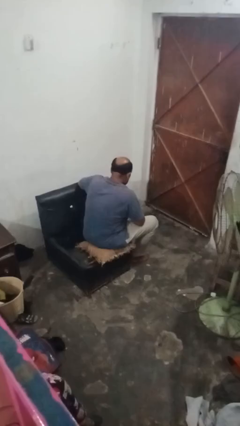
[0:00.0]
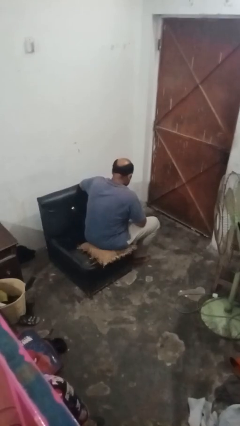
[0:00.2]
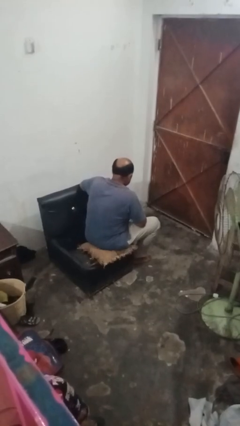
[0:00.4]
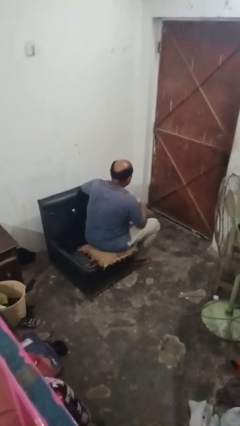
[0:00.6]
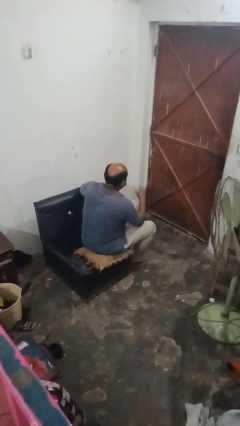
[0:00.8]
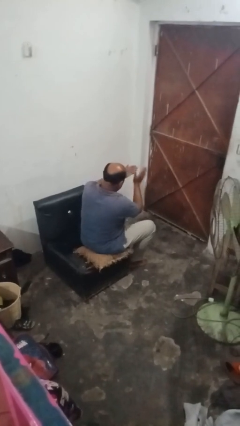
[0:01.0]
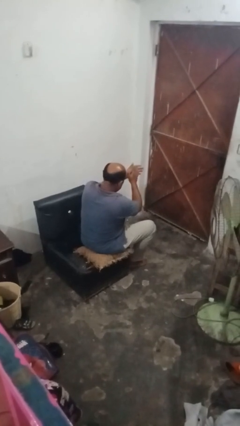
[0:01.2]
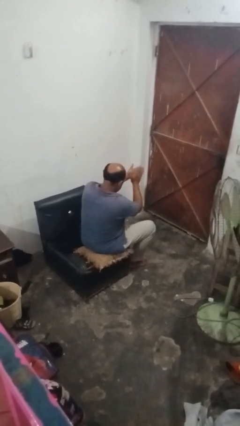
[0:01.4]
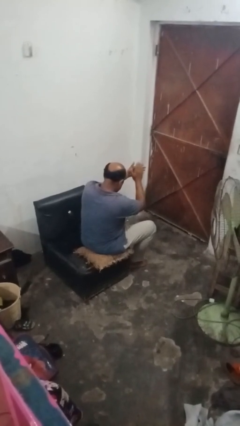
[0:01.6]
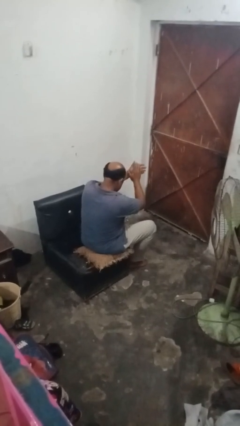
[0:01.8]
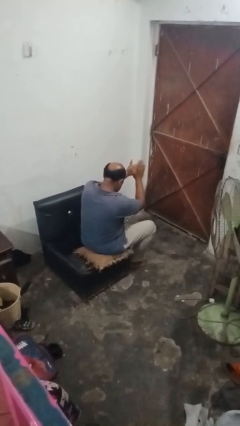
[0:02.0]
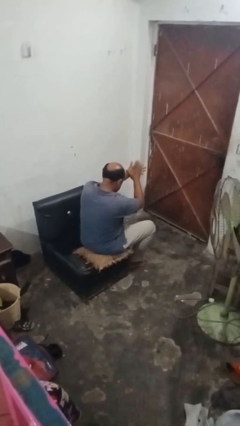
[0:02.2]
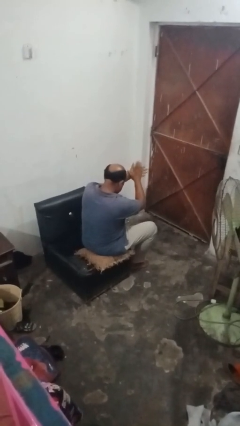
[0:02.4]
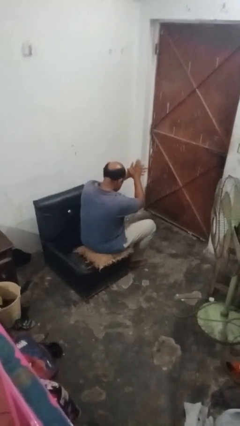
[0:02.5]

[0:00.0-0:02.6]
person claps hands

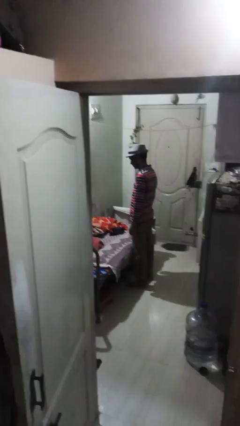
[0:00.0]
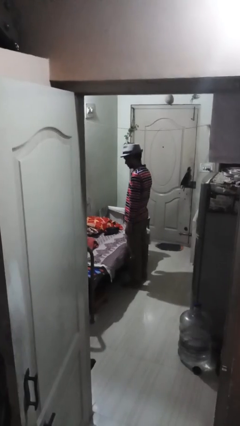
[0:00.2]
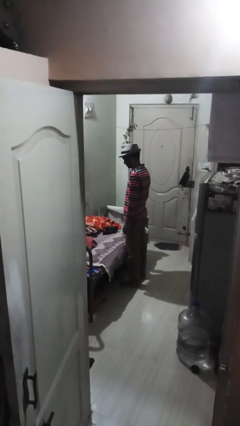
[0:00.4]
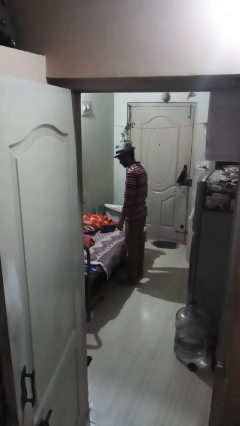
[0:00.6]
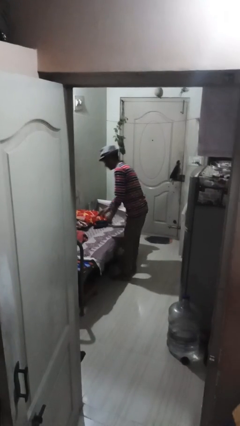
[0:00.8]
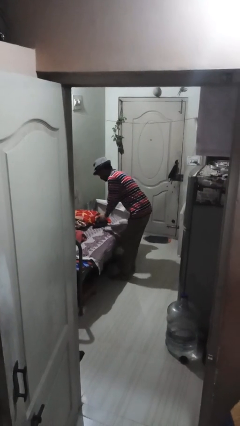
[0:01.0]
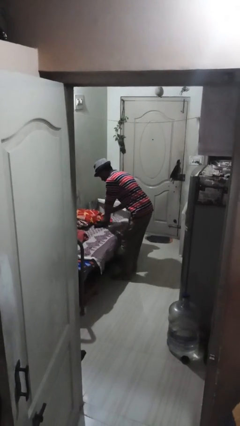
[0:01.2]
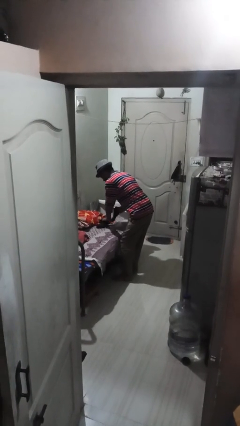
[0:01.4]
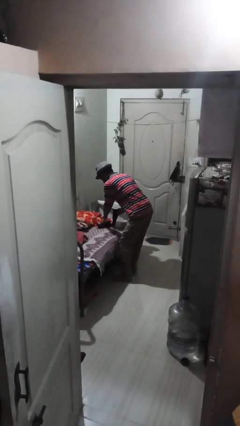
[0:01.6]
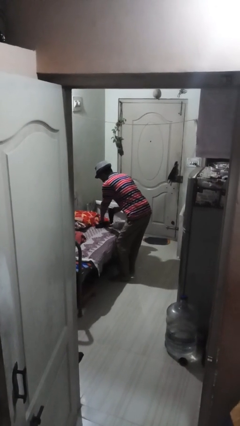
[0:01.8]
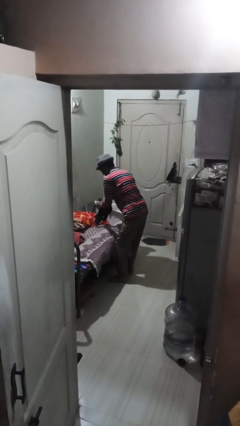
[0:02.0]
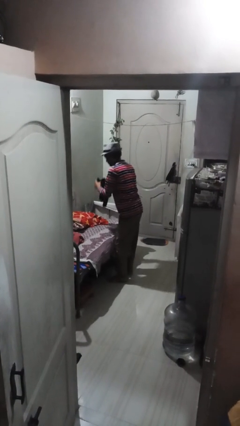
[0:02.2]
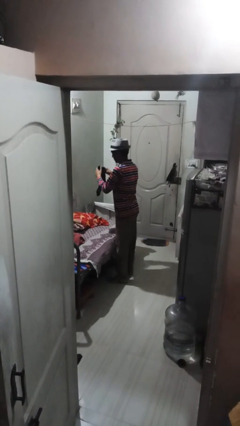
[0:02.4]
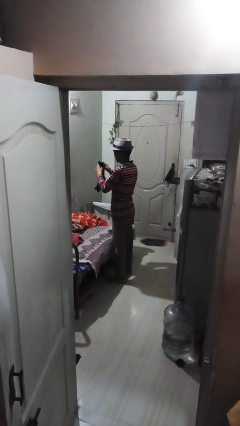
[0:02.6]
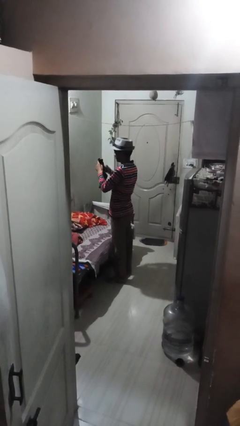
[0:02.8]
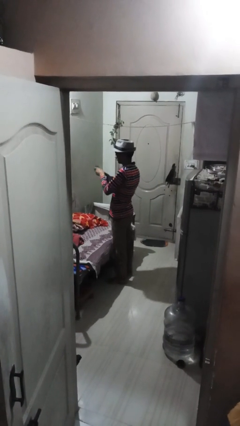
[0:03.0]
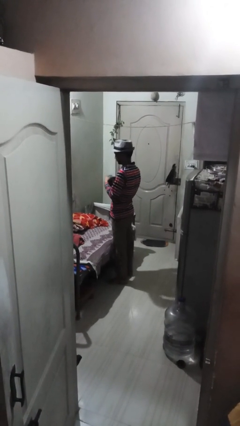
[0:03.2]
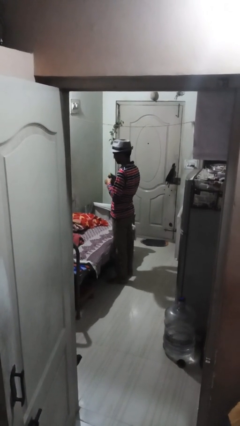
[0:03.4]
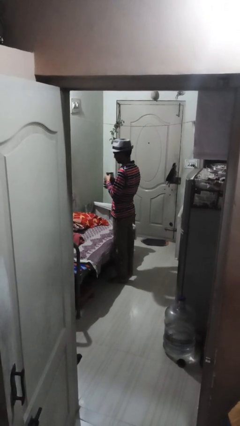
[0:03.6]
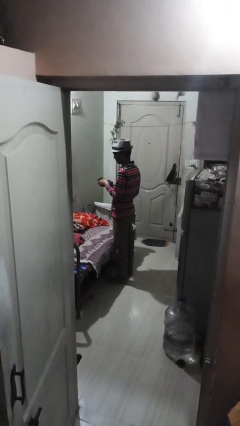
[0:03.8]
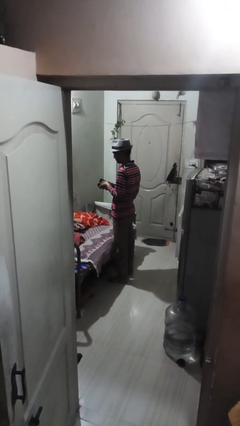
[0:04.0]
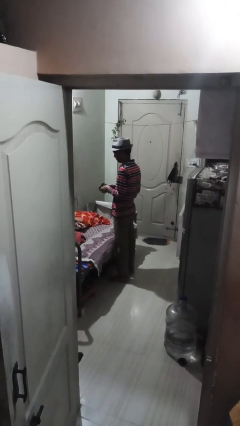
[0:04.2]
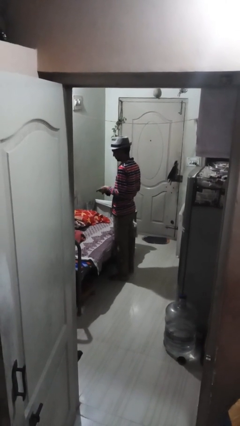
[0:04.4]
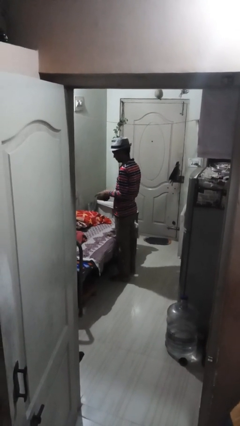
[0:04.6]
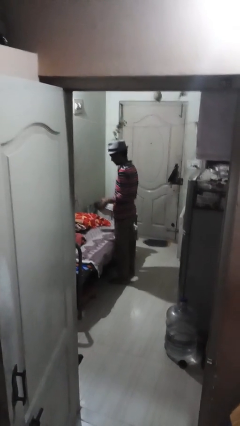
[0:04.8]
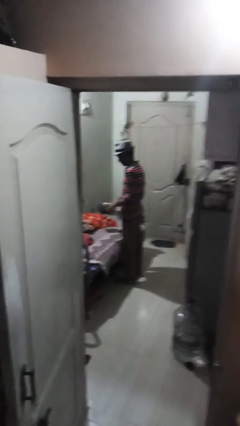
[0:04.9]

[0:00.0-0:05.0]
person folds socks

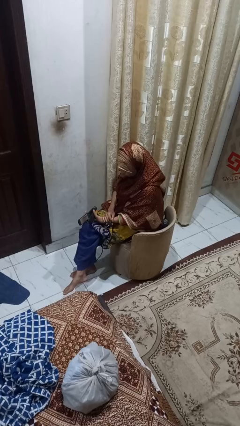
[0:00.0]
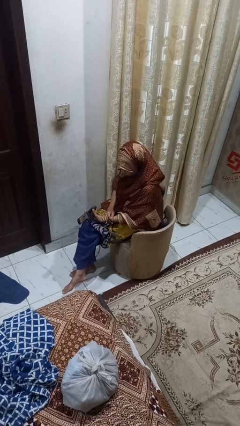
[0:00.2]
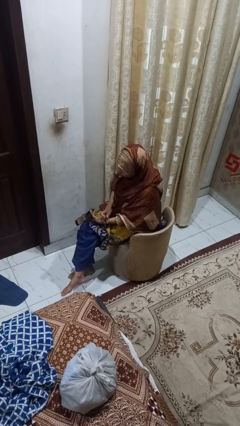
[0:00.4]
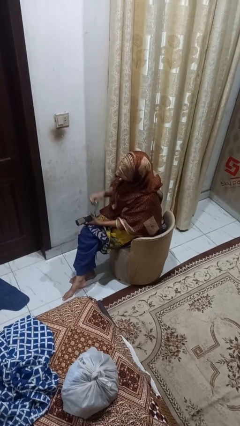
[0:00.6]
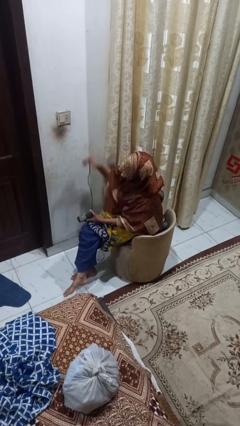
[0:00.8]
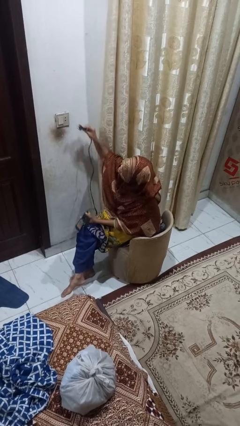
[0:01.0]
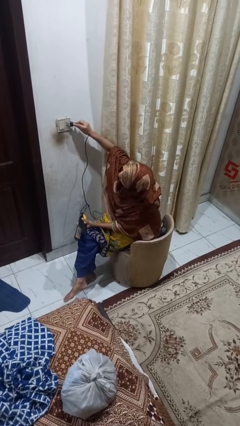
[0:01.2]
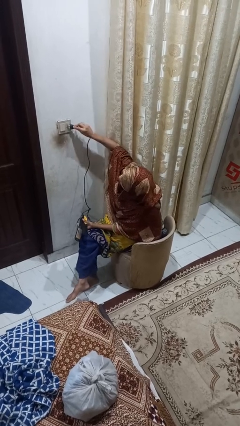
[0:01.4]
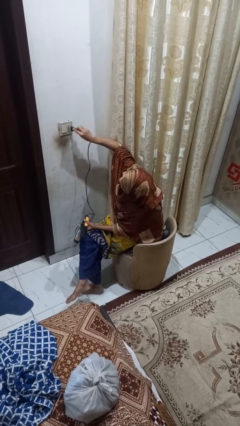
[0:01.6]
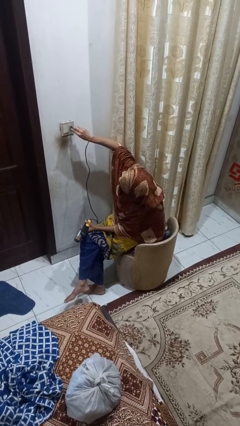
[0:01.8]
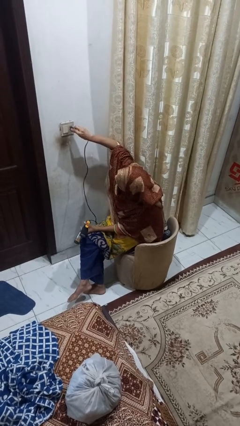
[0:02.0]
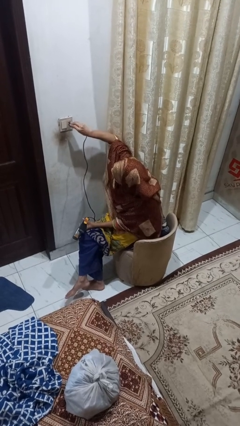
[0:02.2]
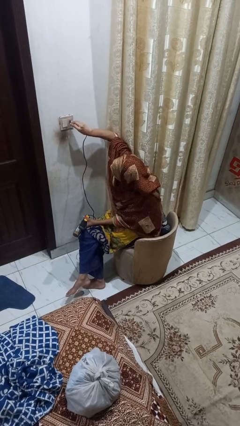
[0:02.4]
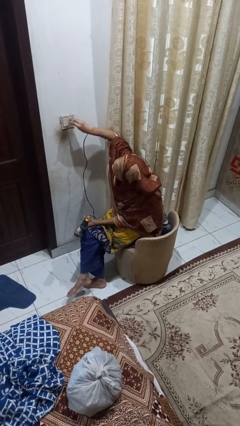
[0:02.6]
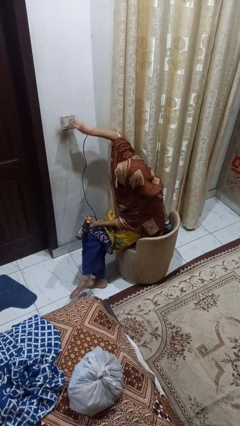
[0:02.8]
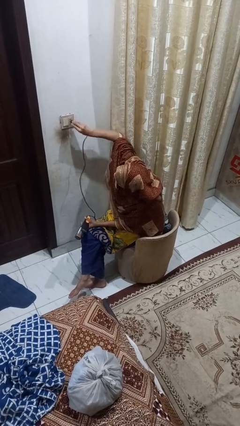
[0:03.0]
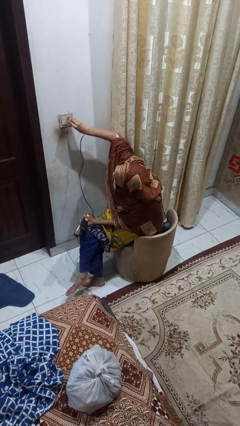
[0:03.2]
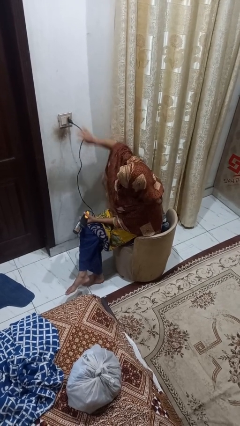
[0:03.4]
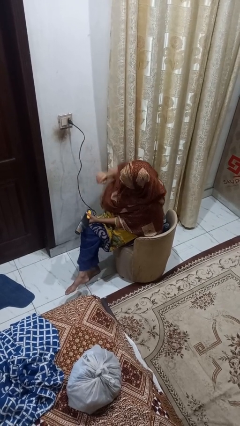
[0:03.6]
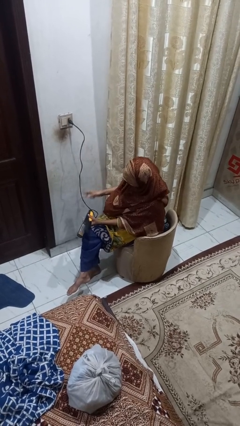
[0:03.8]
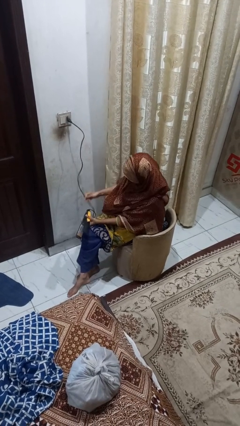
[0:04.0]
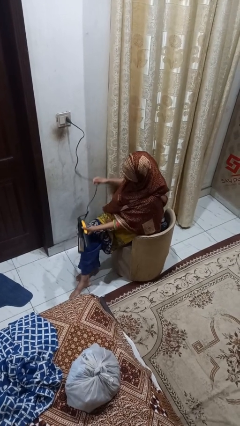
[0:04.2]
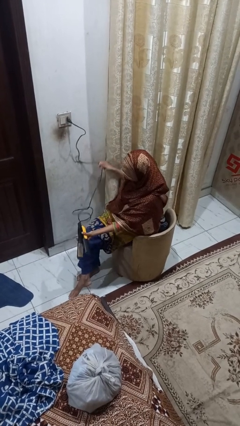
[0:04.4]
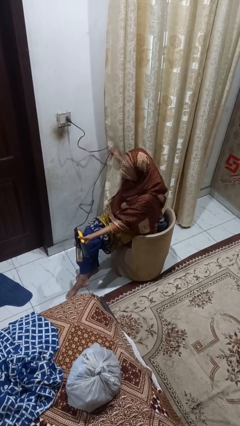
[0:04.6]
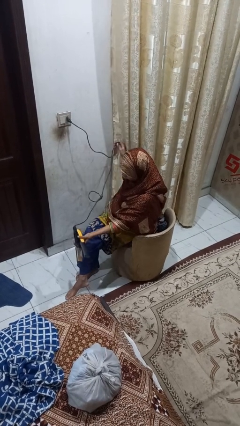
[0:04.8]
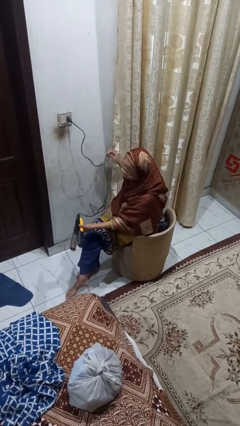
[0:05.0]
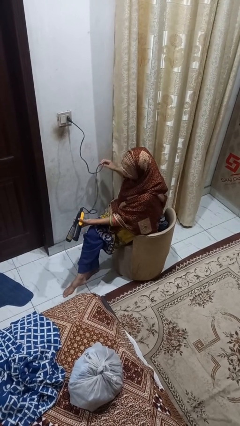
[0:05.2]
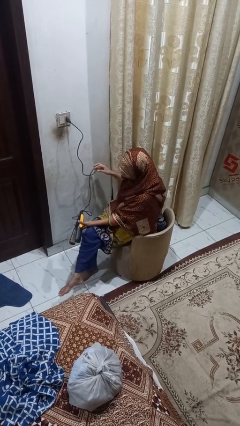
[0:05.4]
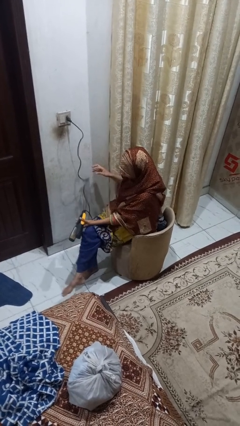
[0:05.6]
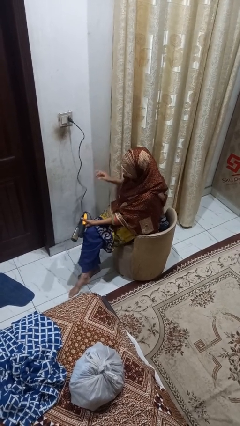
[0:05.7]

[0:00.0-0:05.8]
person plugs into electrical socket

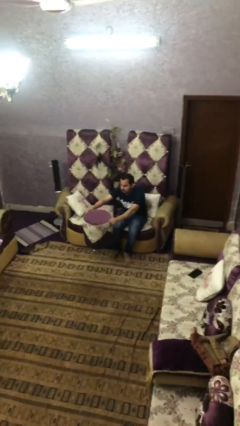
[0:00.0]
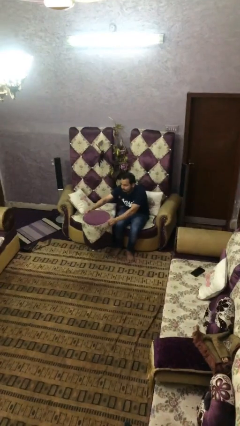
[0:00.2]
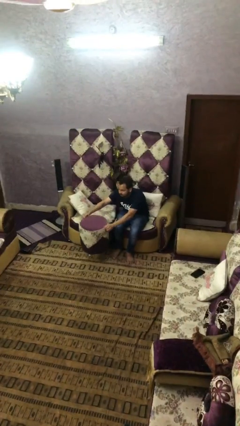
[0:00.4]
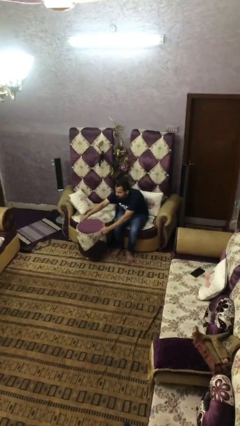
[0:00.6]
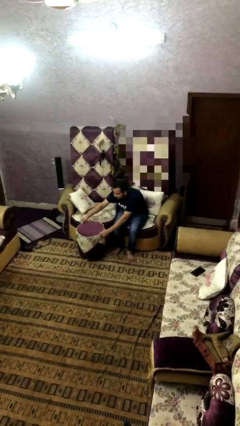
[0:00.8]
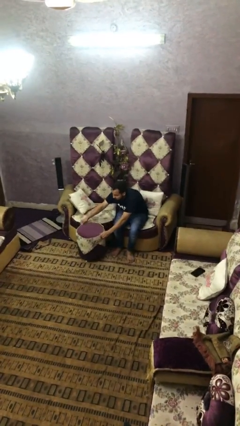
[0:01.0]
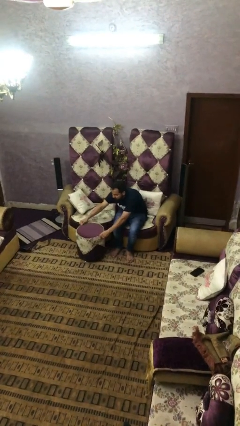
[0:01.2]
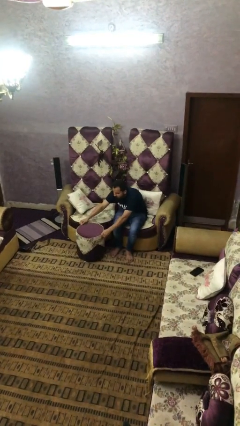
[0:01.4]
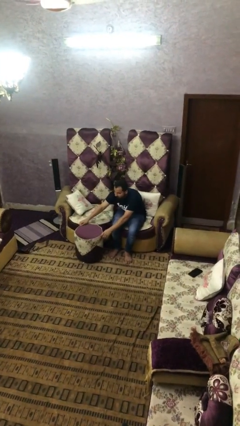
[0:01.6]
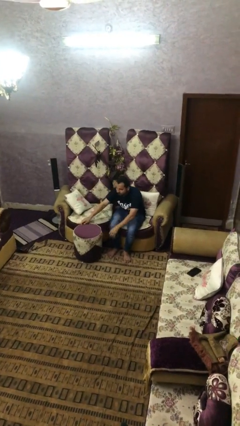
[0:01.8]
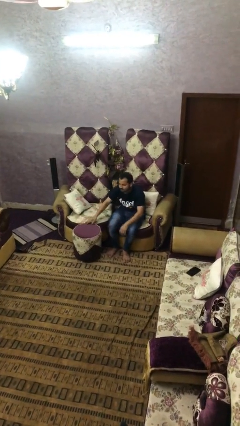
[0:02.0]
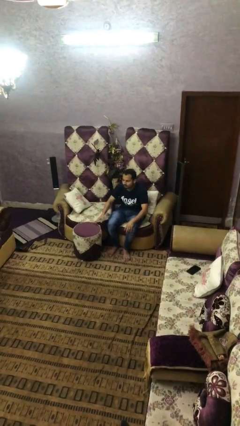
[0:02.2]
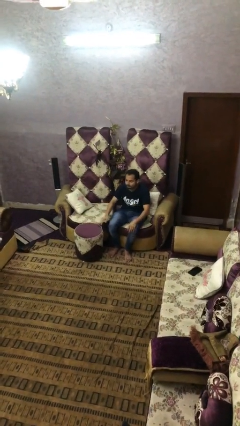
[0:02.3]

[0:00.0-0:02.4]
person puts down object on floor

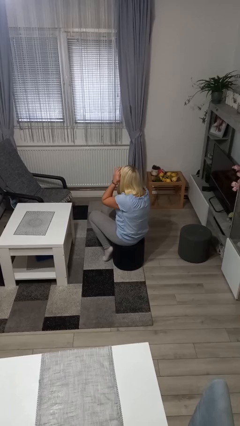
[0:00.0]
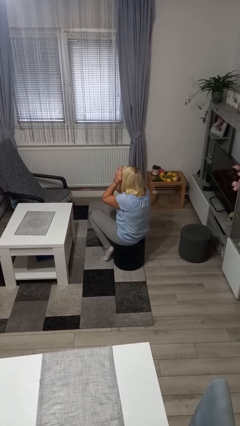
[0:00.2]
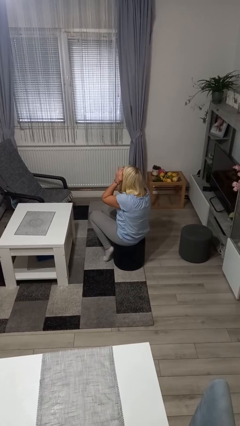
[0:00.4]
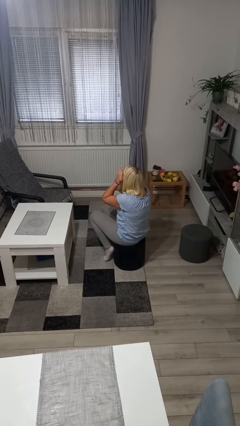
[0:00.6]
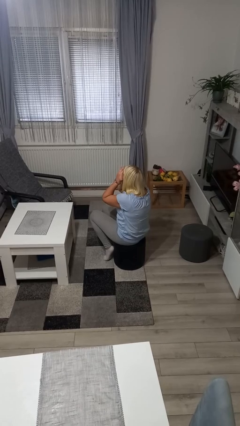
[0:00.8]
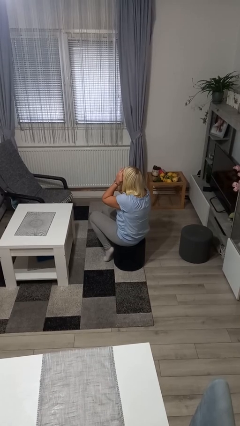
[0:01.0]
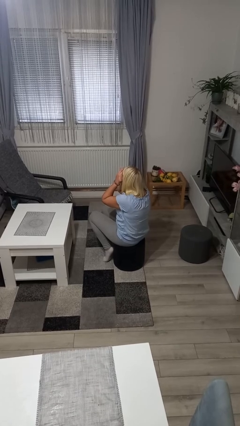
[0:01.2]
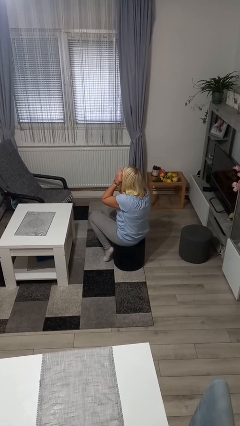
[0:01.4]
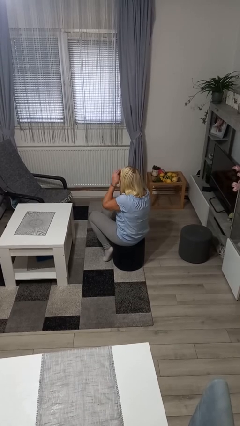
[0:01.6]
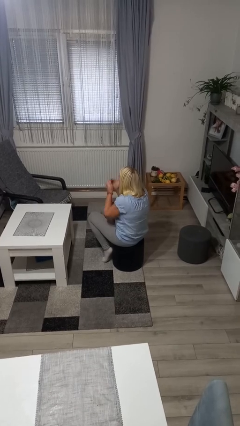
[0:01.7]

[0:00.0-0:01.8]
person shades eyes
